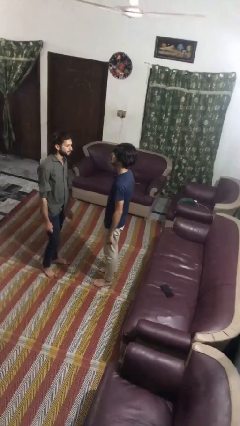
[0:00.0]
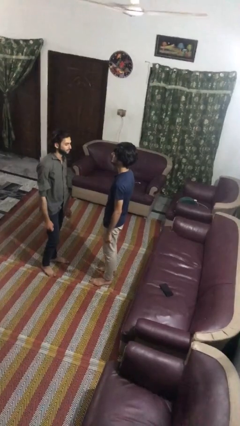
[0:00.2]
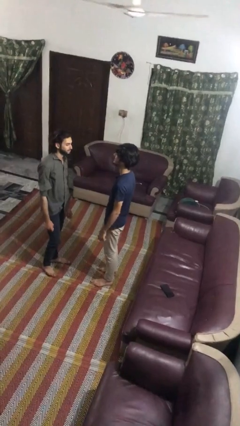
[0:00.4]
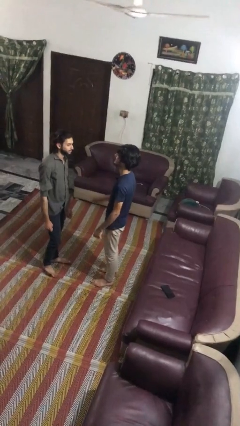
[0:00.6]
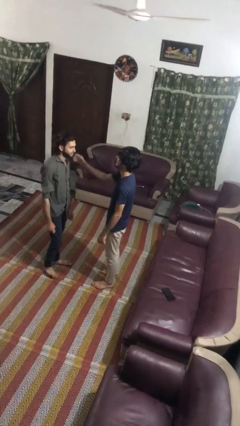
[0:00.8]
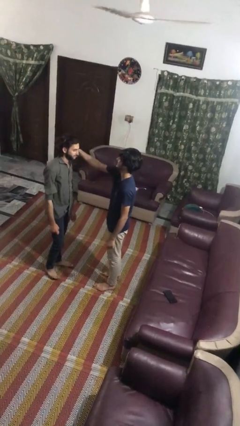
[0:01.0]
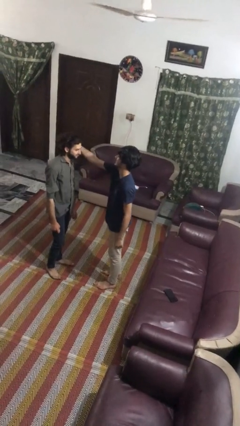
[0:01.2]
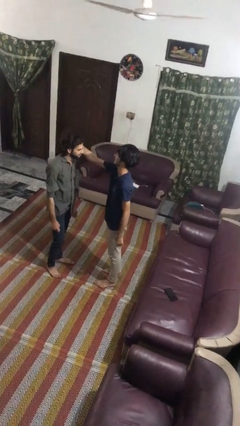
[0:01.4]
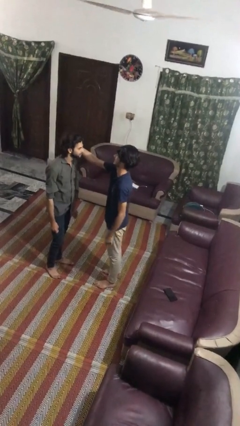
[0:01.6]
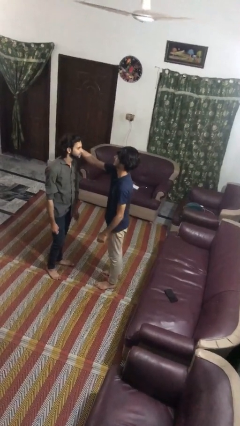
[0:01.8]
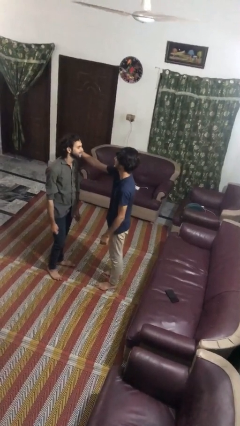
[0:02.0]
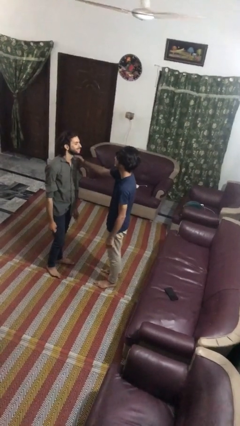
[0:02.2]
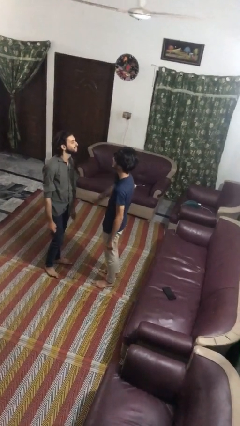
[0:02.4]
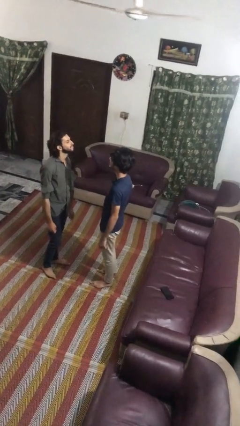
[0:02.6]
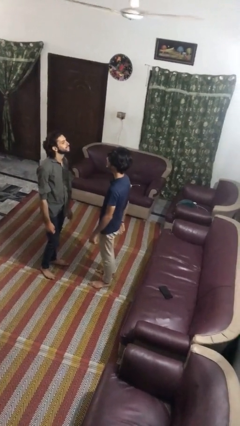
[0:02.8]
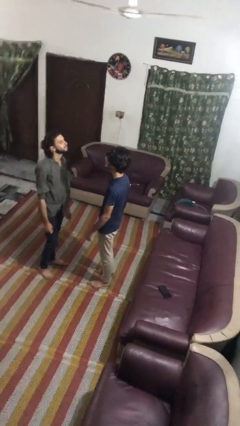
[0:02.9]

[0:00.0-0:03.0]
person grabs person by hair

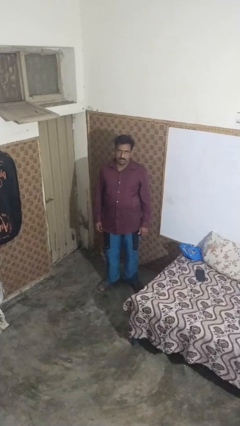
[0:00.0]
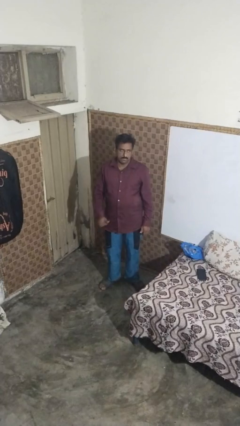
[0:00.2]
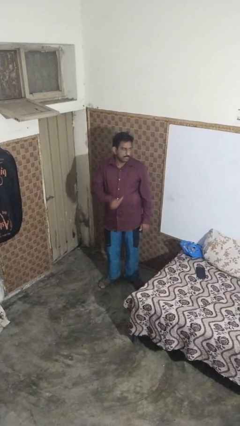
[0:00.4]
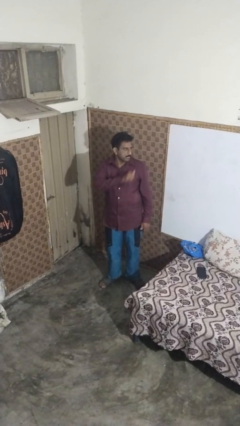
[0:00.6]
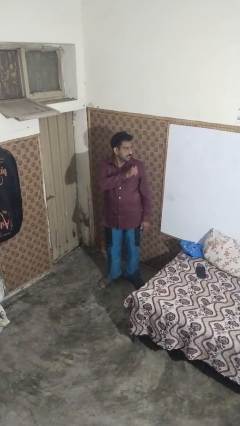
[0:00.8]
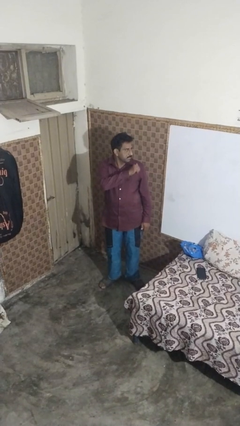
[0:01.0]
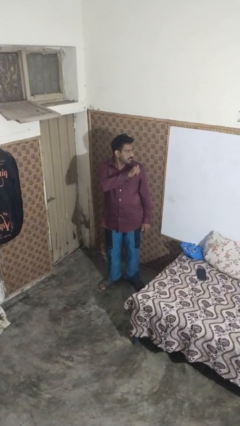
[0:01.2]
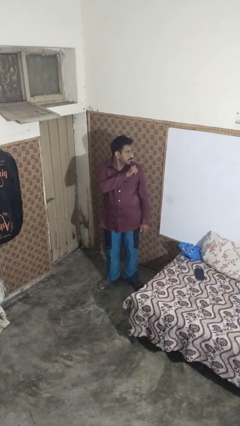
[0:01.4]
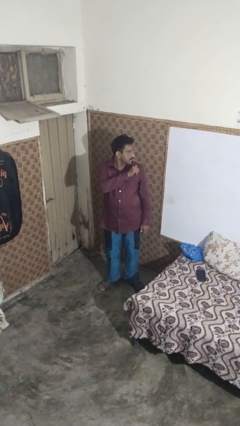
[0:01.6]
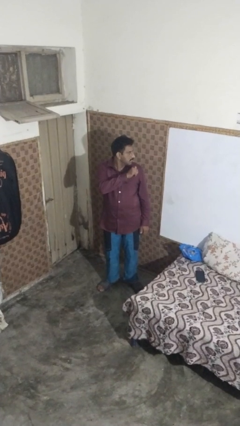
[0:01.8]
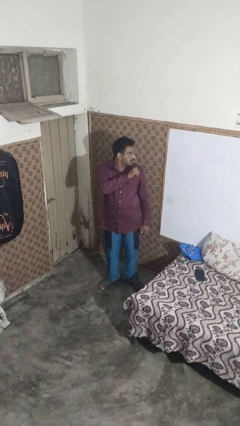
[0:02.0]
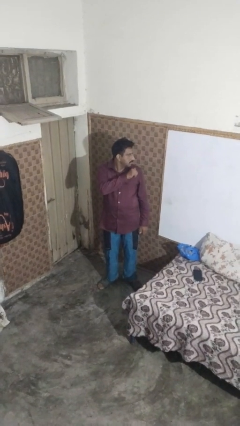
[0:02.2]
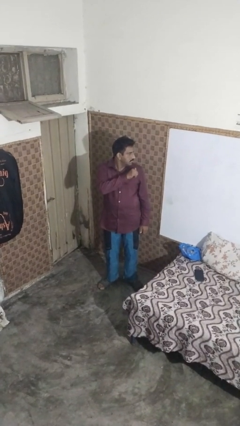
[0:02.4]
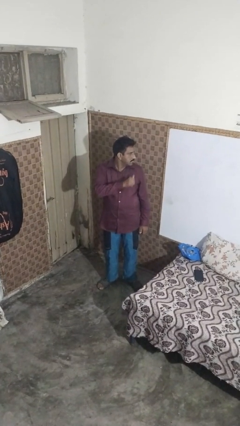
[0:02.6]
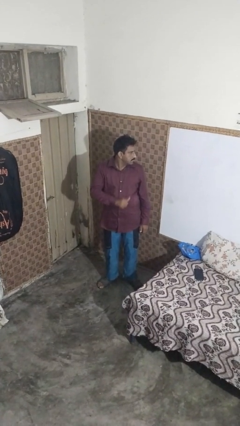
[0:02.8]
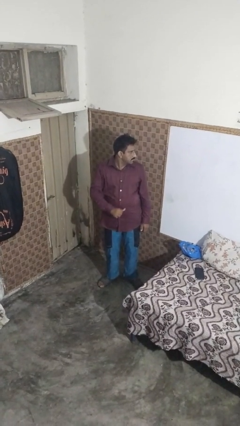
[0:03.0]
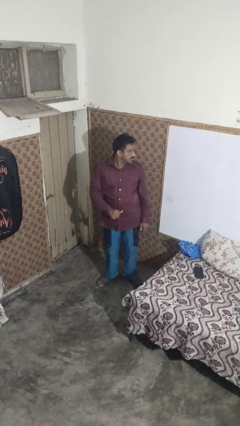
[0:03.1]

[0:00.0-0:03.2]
person gestures behind me

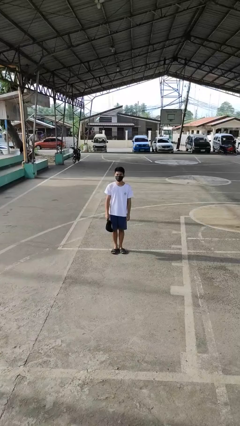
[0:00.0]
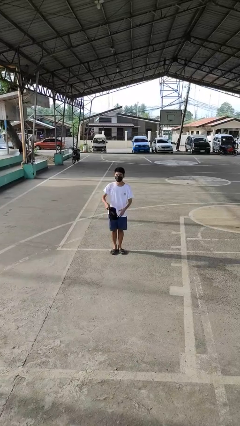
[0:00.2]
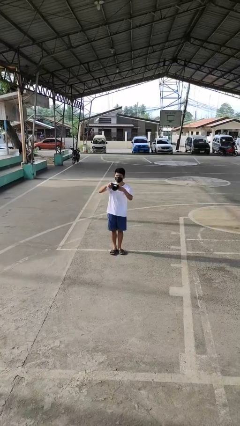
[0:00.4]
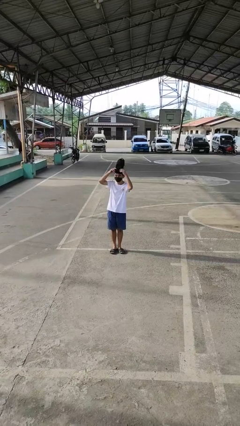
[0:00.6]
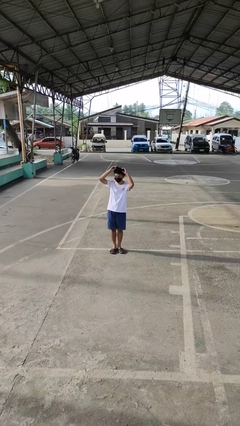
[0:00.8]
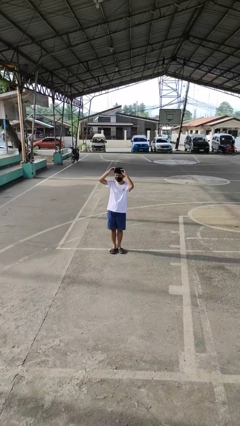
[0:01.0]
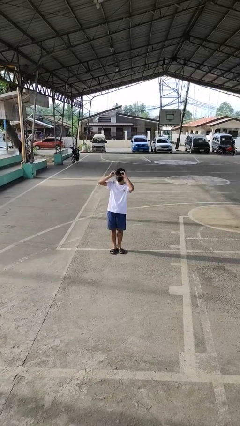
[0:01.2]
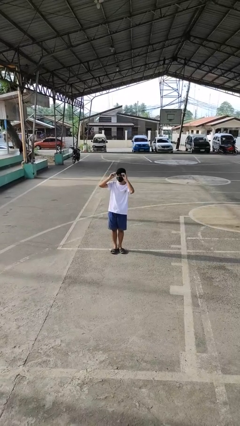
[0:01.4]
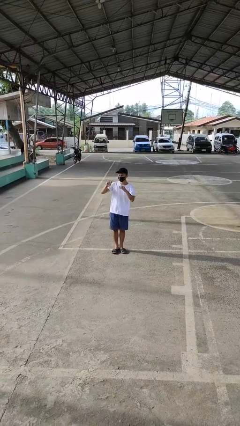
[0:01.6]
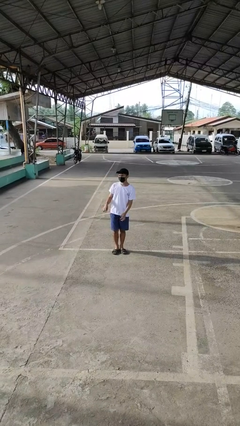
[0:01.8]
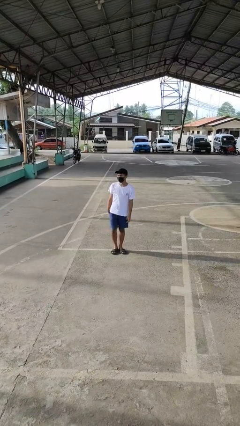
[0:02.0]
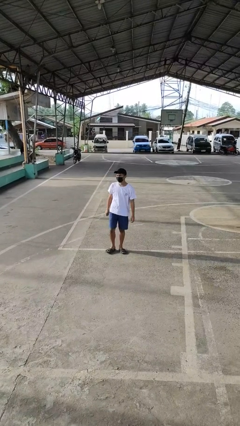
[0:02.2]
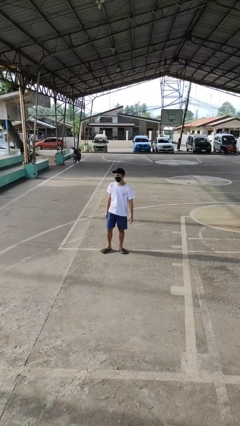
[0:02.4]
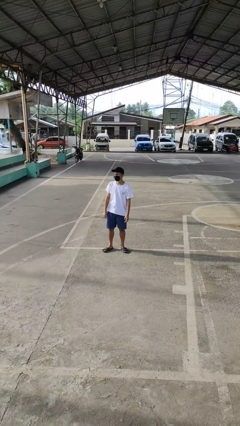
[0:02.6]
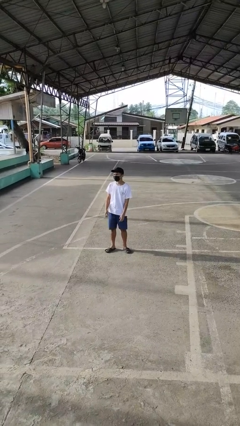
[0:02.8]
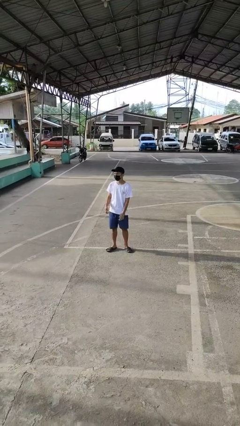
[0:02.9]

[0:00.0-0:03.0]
person puts on hat

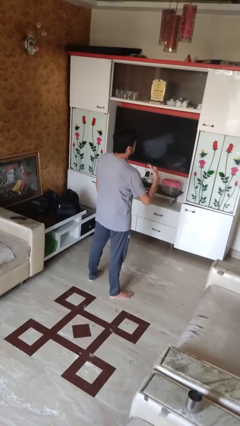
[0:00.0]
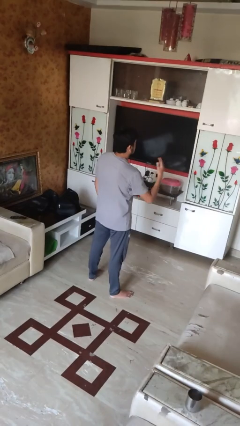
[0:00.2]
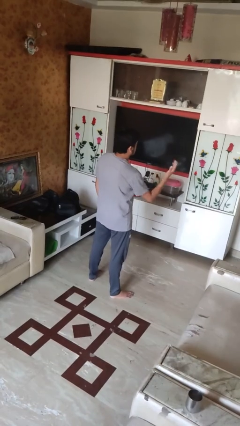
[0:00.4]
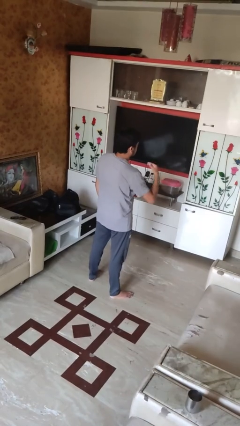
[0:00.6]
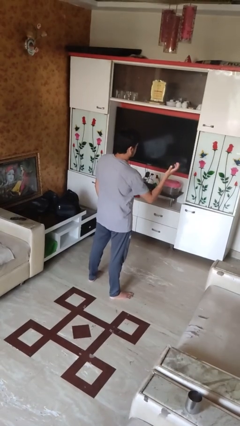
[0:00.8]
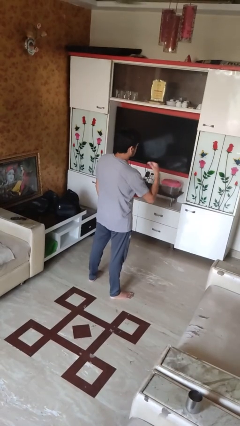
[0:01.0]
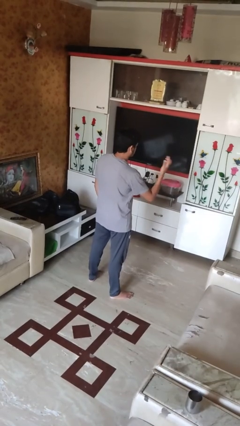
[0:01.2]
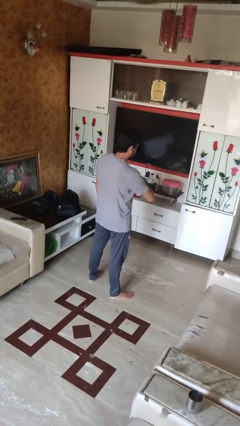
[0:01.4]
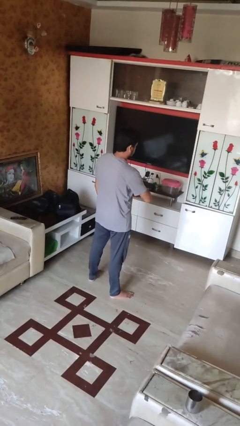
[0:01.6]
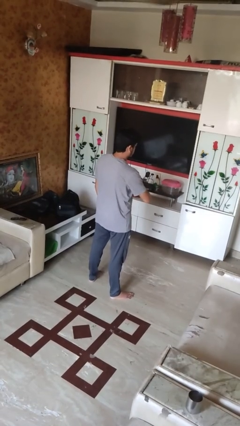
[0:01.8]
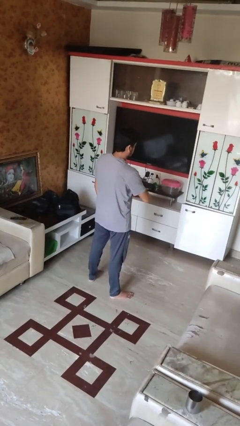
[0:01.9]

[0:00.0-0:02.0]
person gestures come here

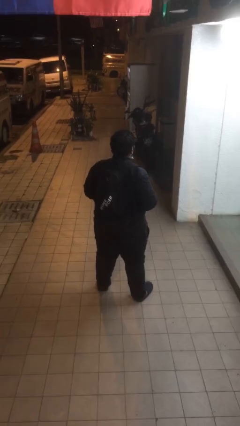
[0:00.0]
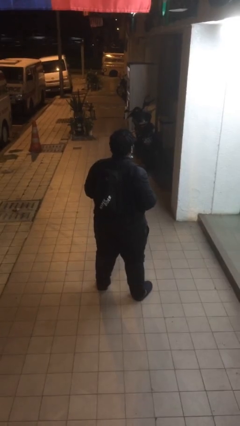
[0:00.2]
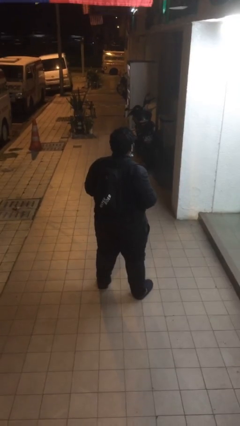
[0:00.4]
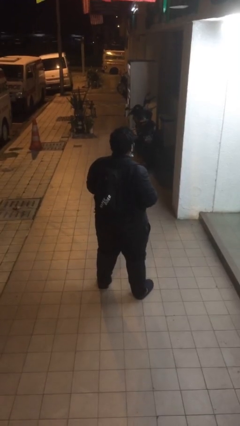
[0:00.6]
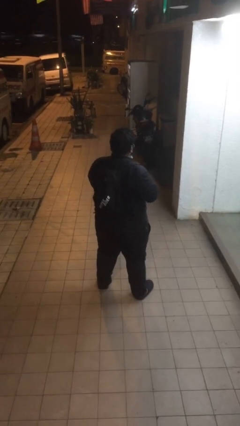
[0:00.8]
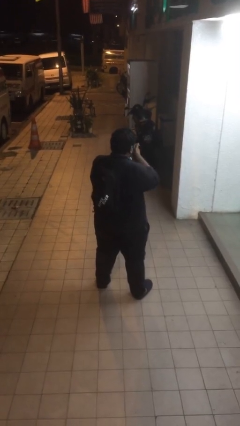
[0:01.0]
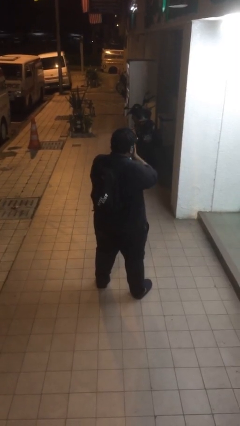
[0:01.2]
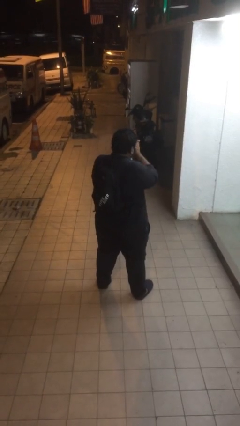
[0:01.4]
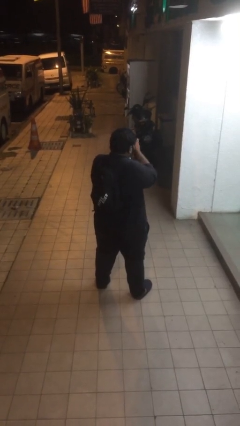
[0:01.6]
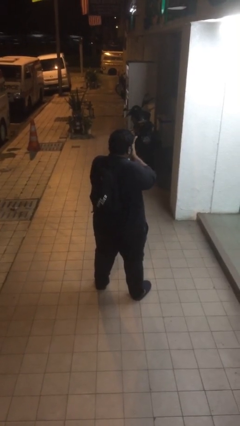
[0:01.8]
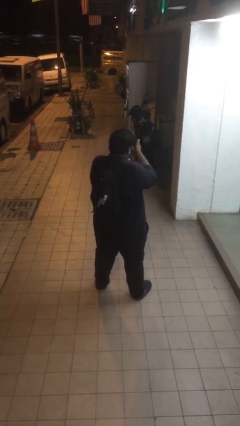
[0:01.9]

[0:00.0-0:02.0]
person blows into hands

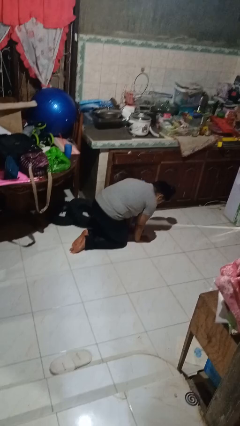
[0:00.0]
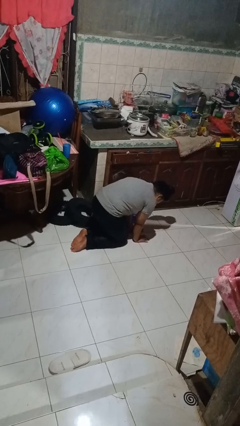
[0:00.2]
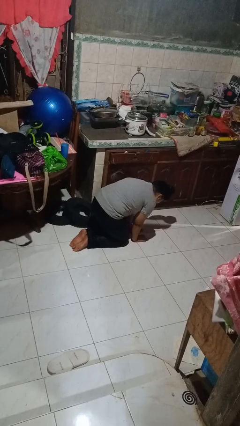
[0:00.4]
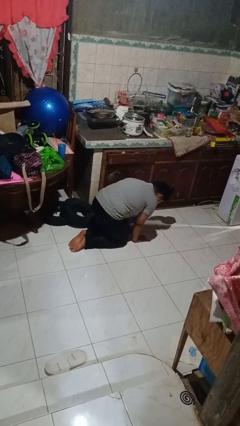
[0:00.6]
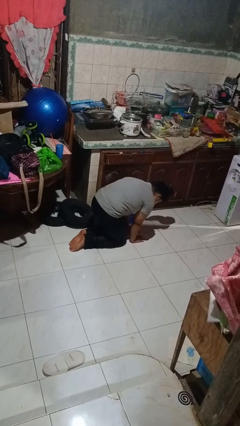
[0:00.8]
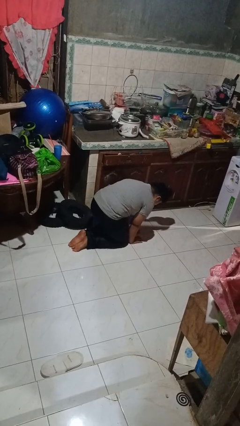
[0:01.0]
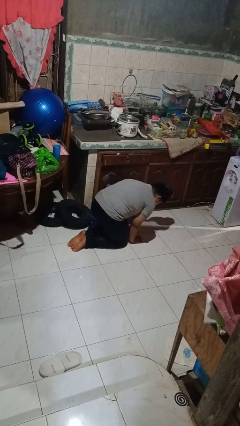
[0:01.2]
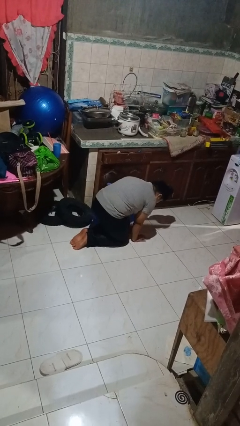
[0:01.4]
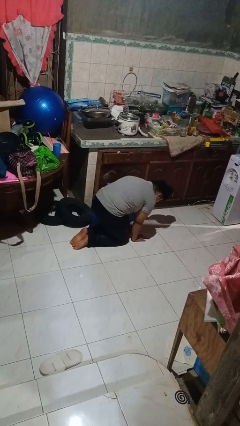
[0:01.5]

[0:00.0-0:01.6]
person crawls

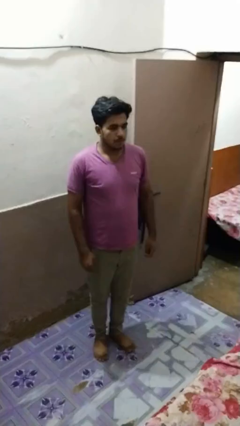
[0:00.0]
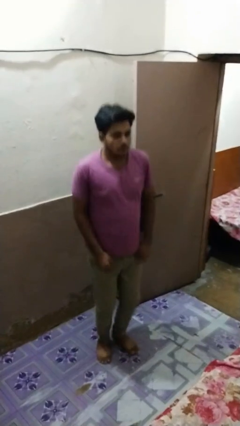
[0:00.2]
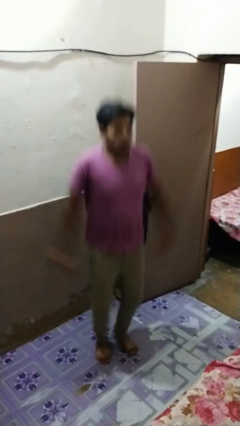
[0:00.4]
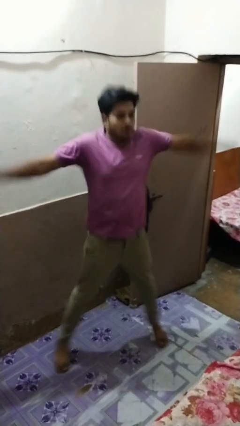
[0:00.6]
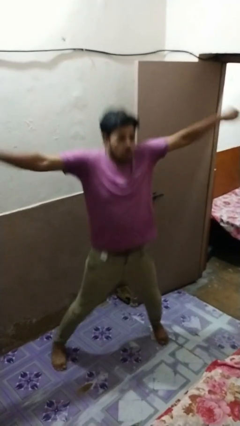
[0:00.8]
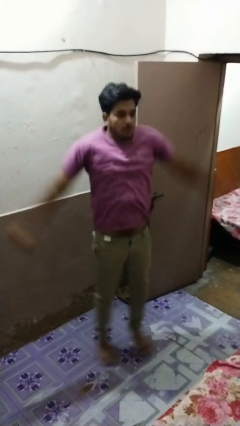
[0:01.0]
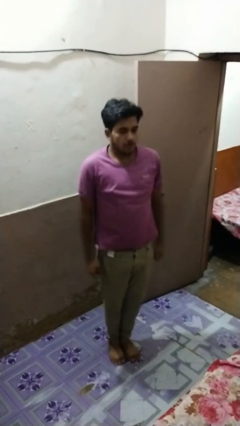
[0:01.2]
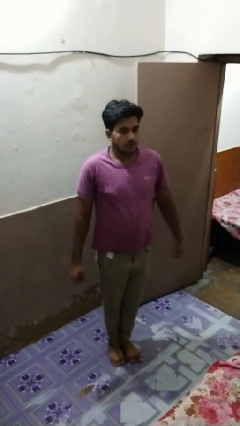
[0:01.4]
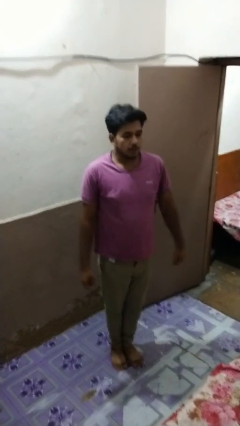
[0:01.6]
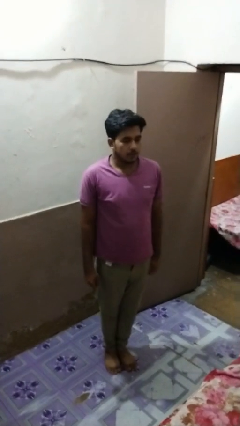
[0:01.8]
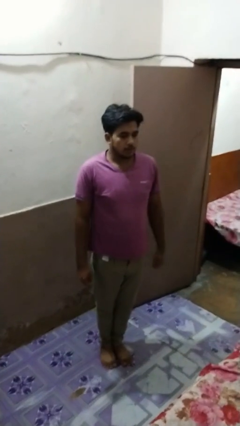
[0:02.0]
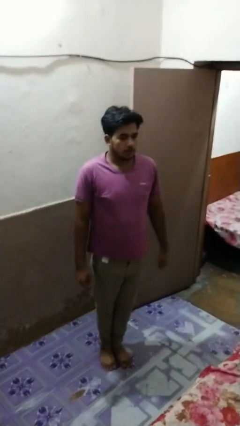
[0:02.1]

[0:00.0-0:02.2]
person exercises with jumping jacks
